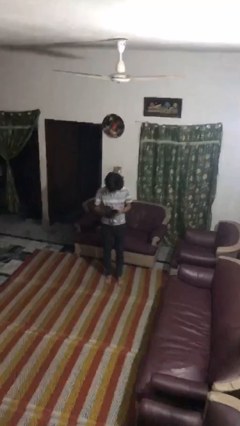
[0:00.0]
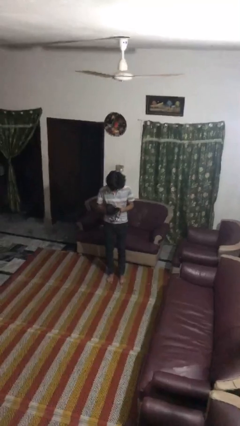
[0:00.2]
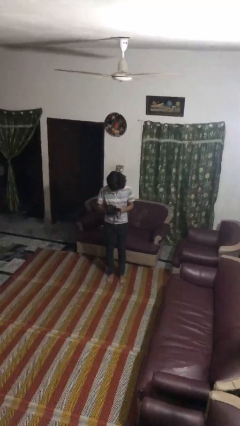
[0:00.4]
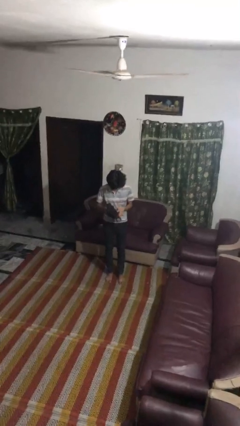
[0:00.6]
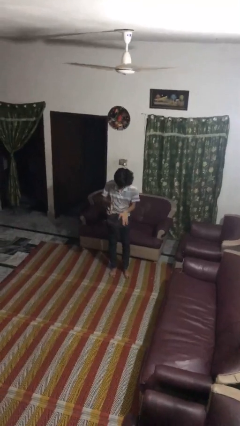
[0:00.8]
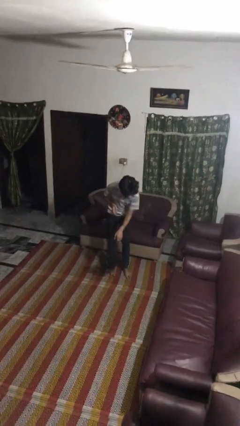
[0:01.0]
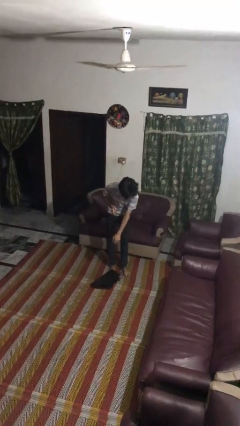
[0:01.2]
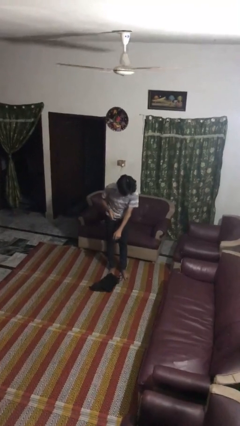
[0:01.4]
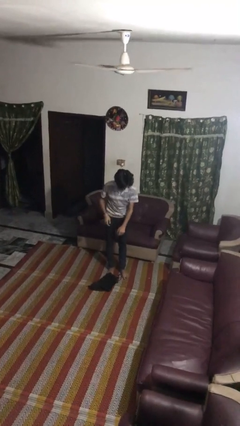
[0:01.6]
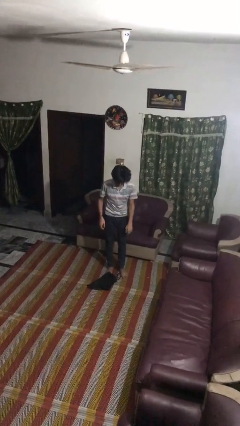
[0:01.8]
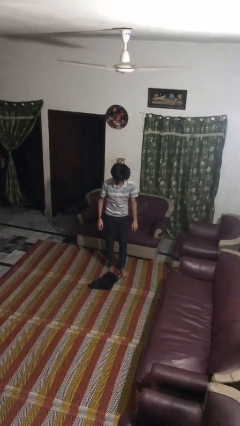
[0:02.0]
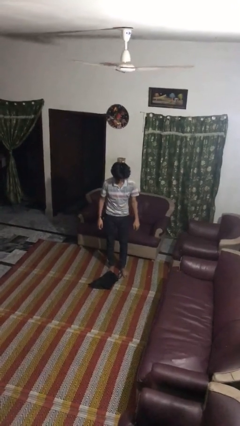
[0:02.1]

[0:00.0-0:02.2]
person drops object

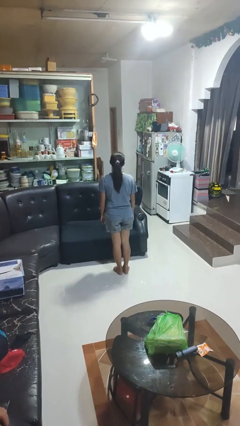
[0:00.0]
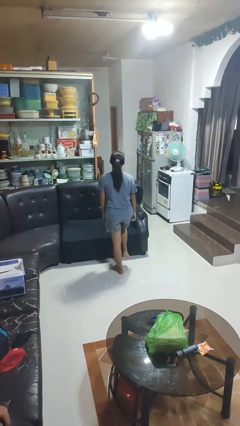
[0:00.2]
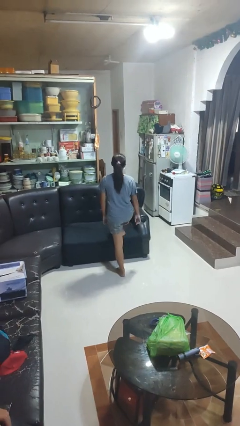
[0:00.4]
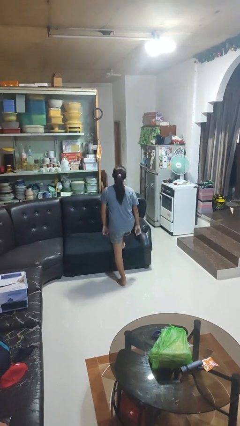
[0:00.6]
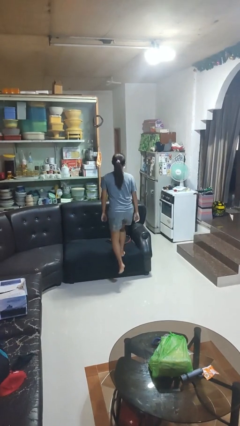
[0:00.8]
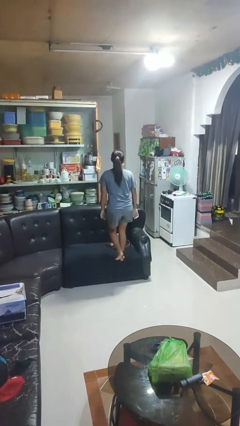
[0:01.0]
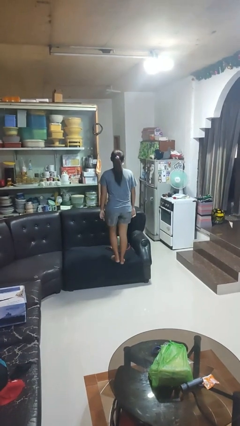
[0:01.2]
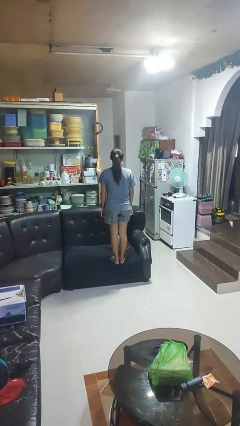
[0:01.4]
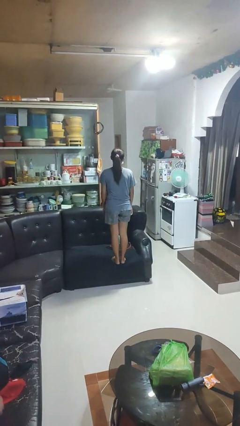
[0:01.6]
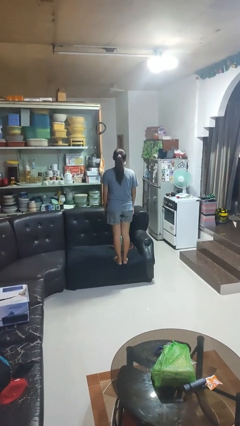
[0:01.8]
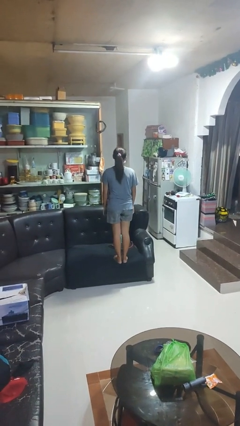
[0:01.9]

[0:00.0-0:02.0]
person climbs on couch

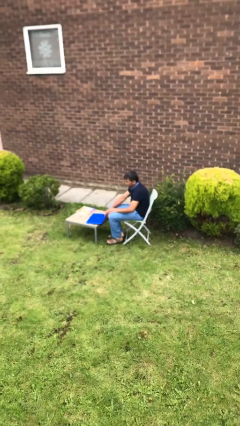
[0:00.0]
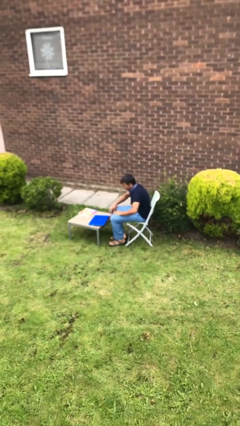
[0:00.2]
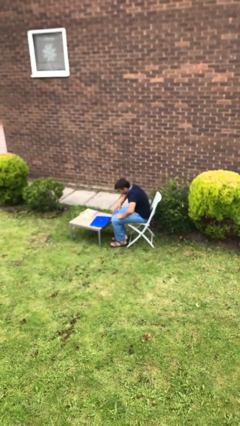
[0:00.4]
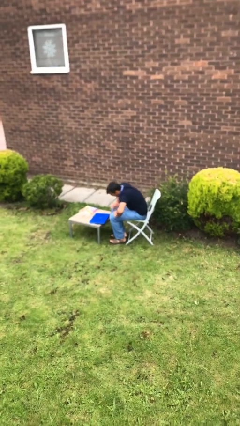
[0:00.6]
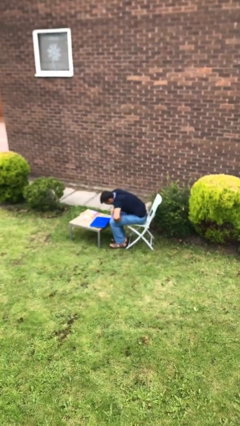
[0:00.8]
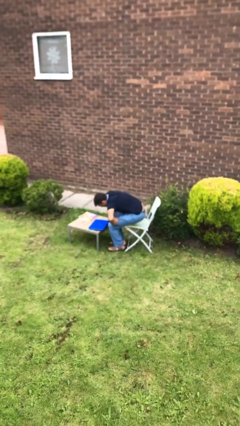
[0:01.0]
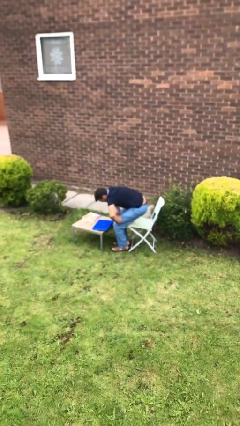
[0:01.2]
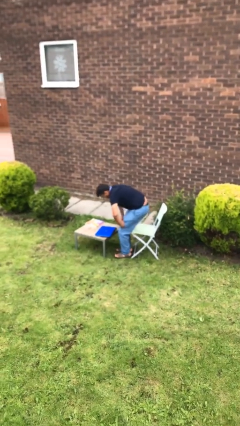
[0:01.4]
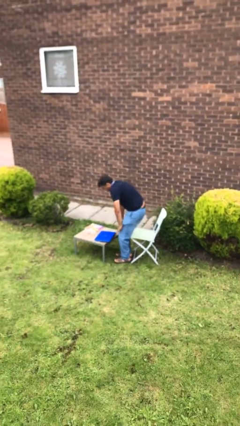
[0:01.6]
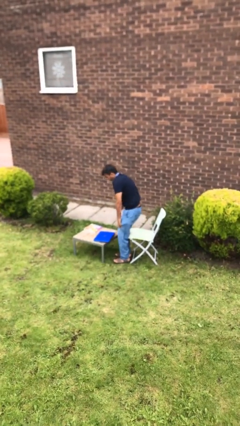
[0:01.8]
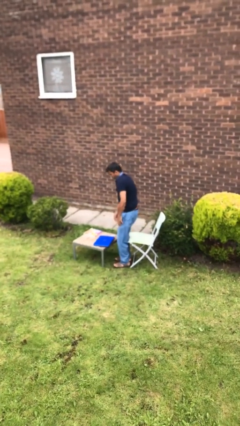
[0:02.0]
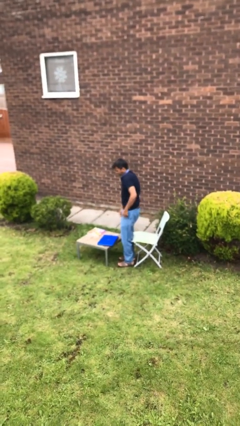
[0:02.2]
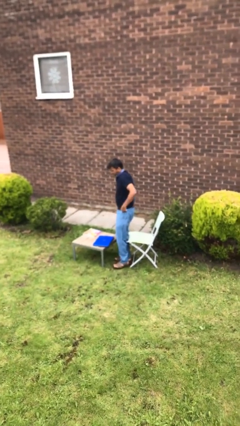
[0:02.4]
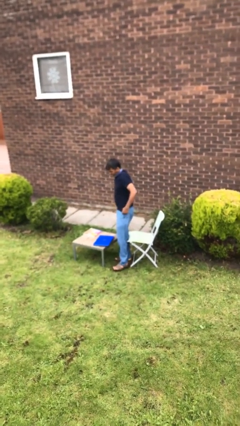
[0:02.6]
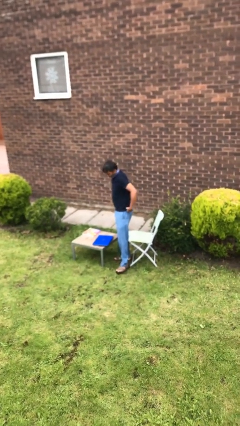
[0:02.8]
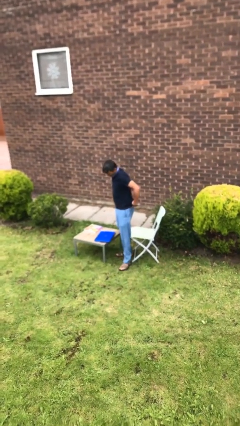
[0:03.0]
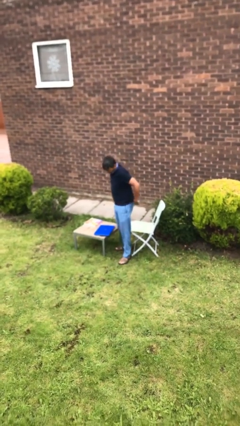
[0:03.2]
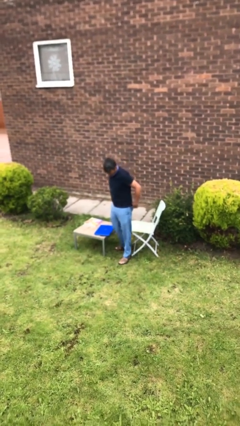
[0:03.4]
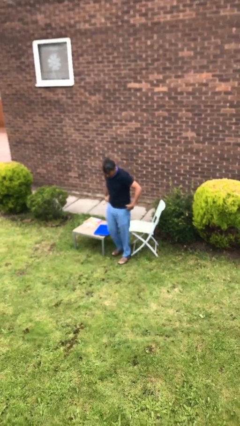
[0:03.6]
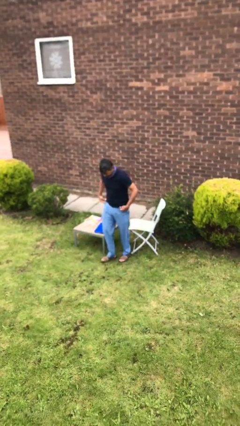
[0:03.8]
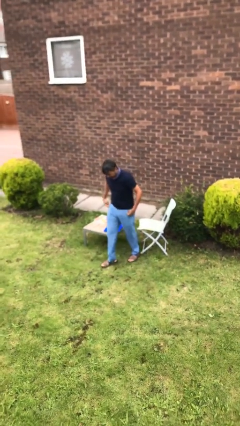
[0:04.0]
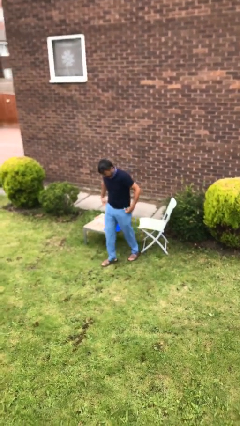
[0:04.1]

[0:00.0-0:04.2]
person stands up

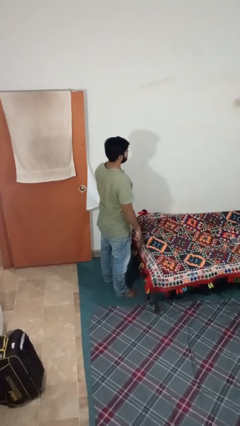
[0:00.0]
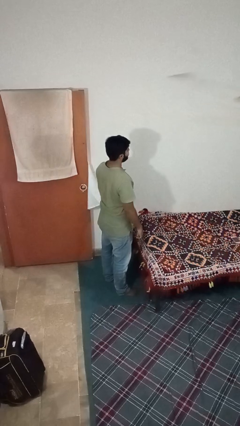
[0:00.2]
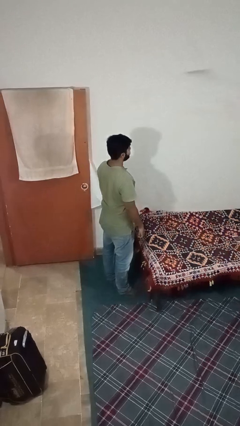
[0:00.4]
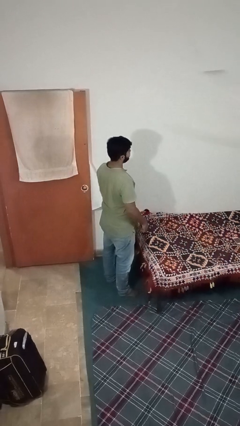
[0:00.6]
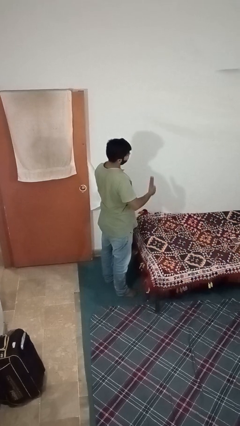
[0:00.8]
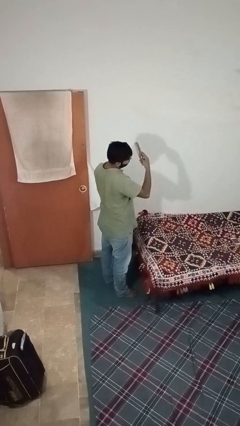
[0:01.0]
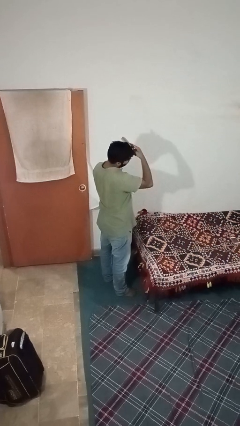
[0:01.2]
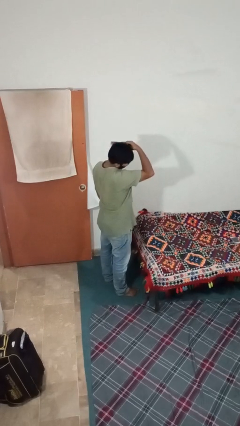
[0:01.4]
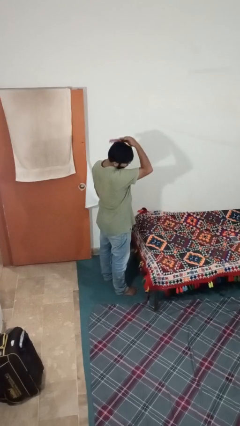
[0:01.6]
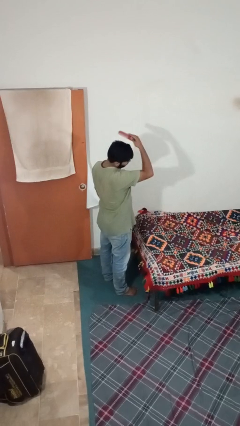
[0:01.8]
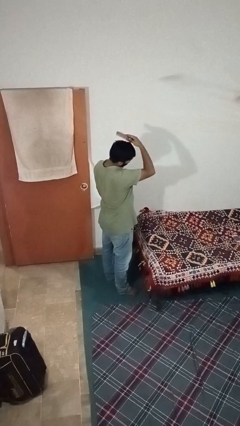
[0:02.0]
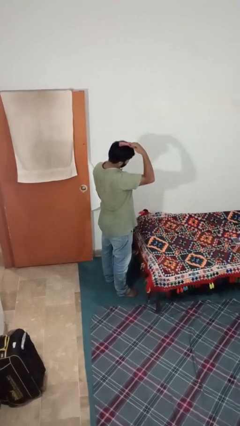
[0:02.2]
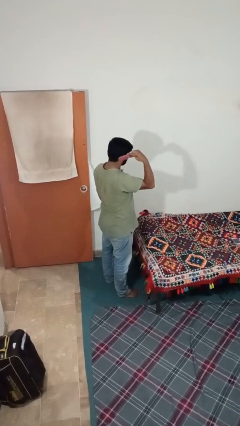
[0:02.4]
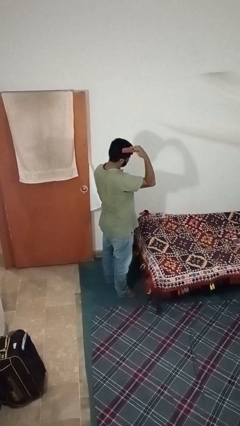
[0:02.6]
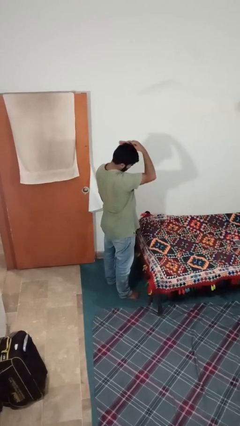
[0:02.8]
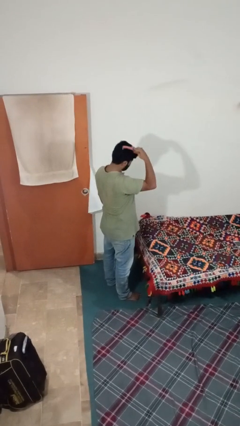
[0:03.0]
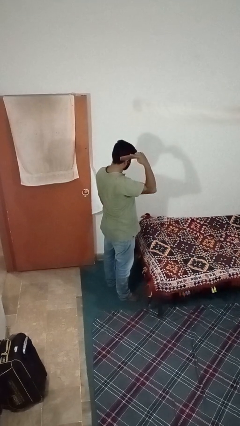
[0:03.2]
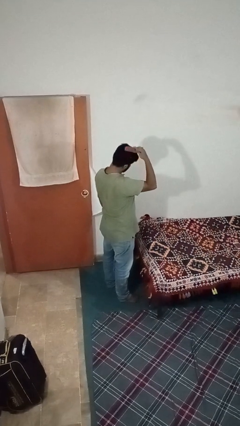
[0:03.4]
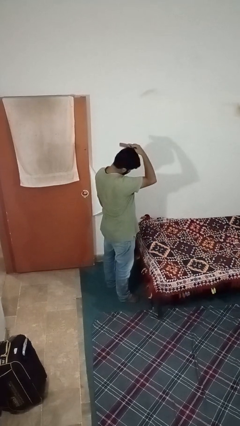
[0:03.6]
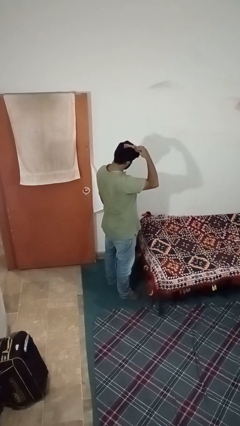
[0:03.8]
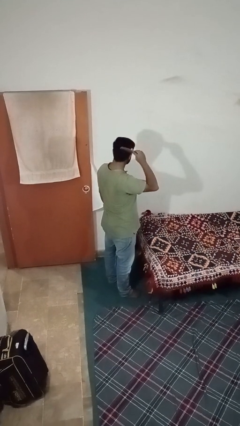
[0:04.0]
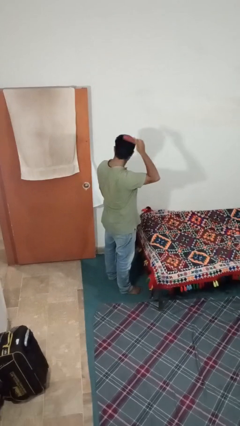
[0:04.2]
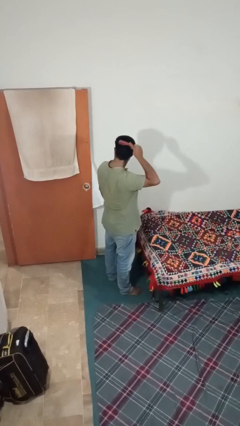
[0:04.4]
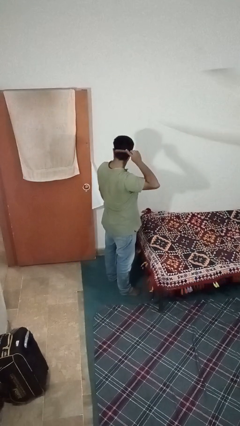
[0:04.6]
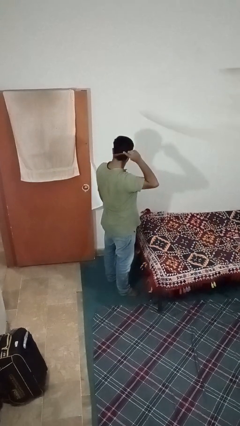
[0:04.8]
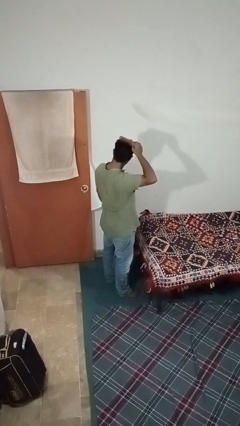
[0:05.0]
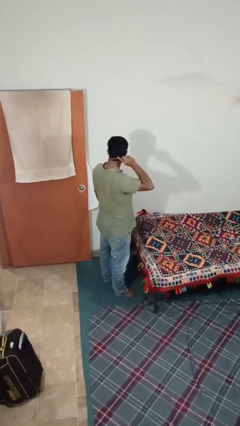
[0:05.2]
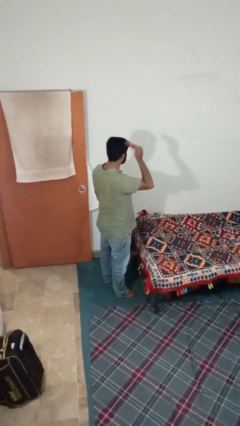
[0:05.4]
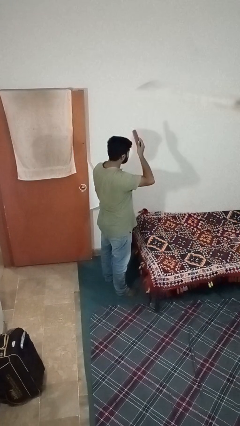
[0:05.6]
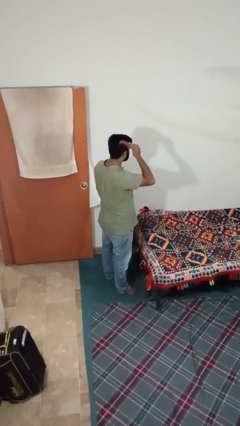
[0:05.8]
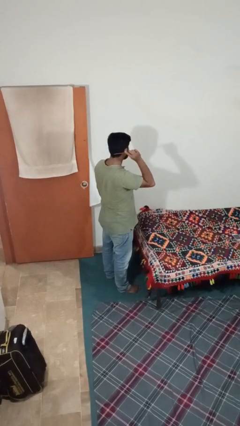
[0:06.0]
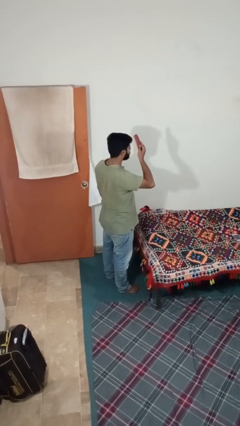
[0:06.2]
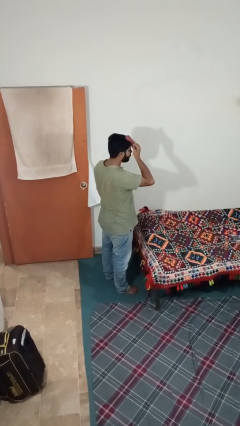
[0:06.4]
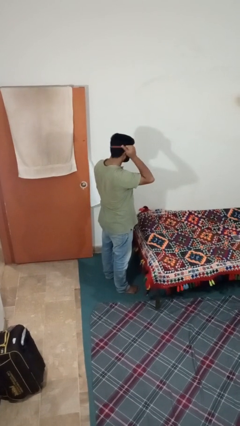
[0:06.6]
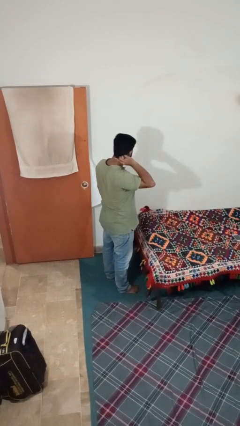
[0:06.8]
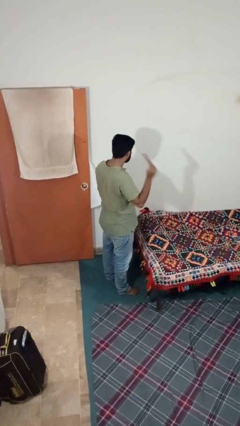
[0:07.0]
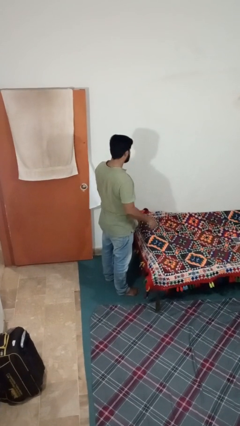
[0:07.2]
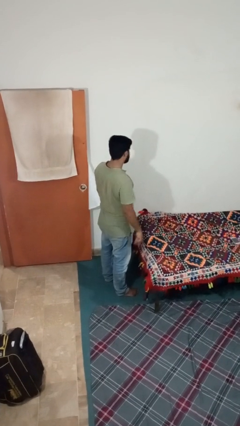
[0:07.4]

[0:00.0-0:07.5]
person brushes hair

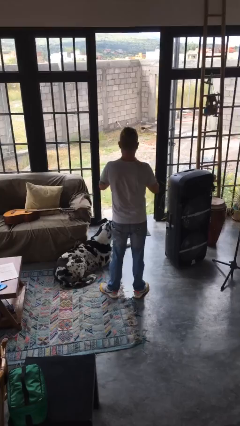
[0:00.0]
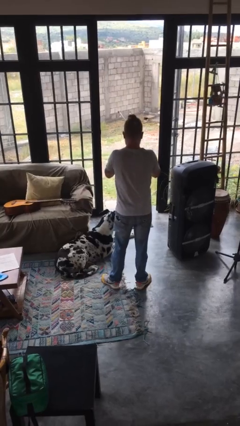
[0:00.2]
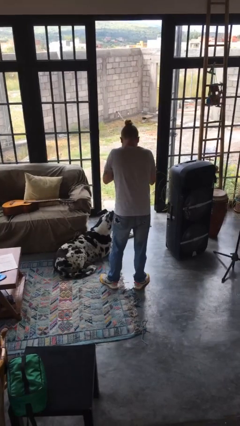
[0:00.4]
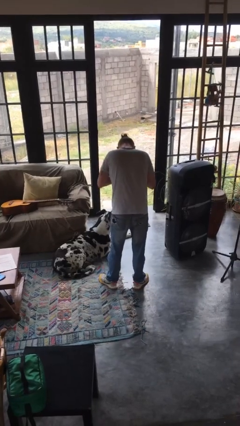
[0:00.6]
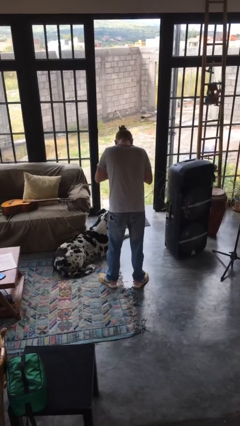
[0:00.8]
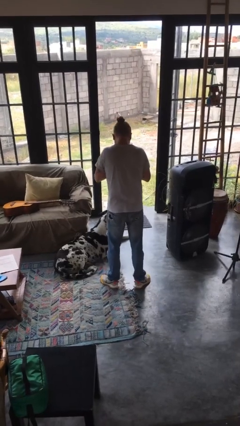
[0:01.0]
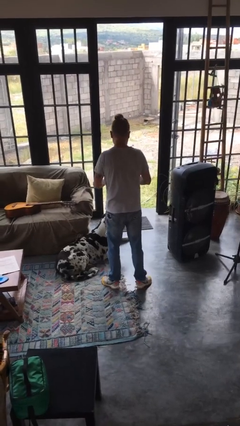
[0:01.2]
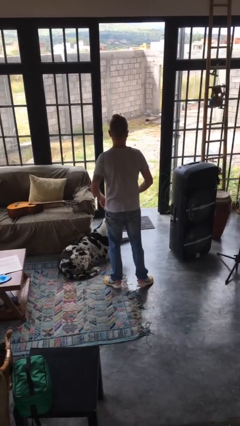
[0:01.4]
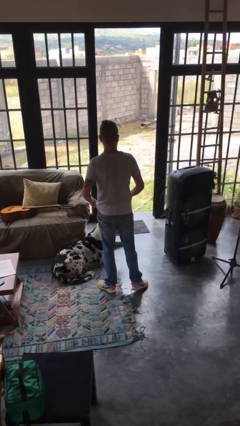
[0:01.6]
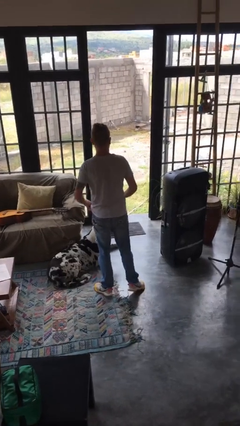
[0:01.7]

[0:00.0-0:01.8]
person sneezes into hand
